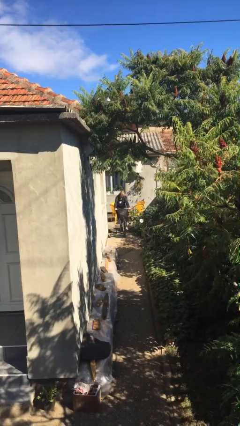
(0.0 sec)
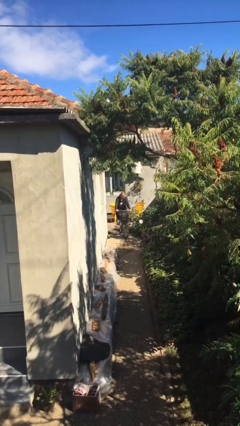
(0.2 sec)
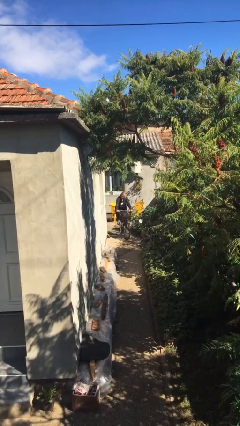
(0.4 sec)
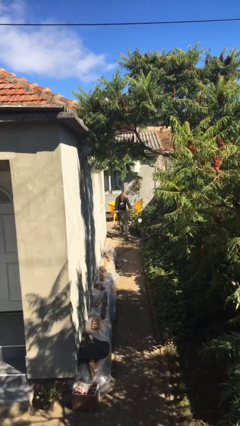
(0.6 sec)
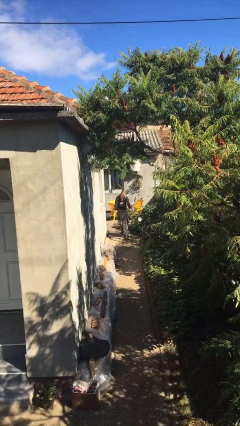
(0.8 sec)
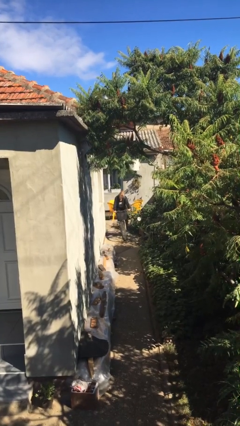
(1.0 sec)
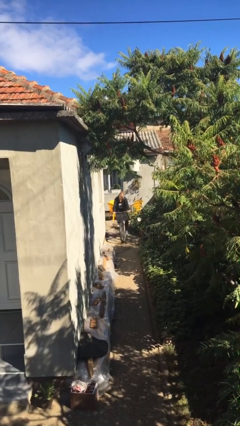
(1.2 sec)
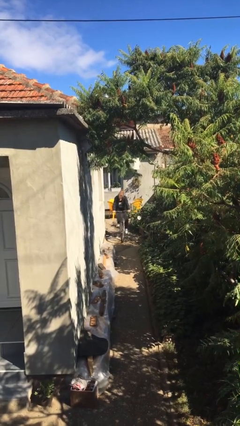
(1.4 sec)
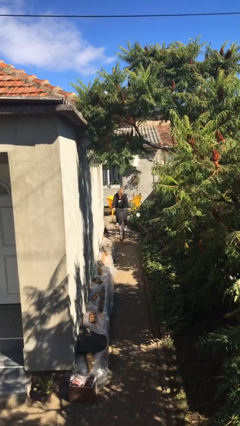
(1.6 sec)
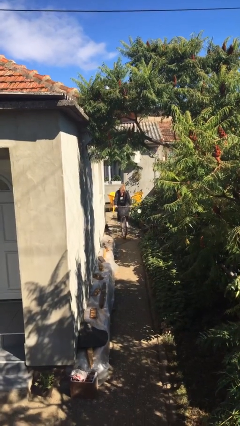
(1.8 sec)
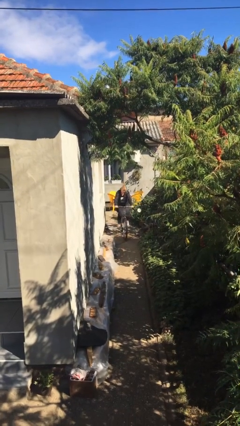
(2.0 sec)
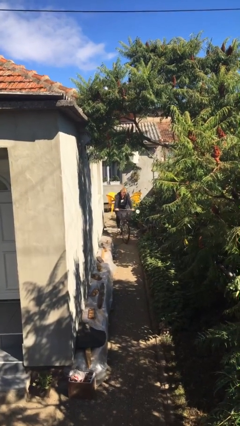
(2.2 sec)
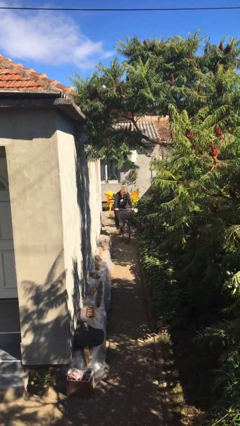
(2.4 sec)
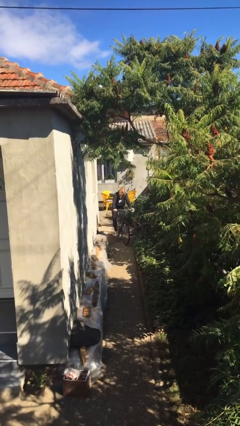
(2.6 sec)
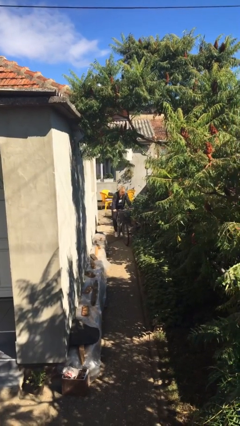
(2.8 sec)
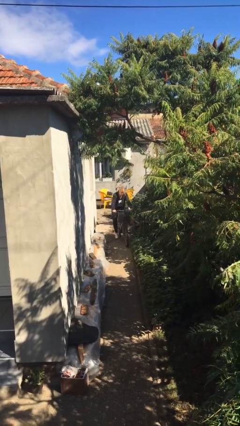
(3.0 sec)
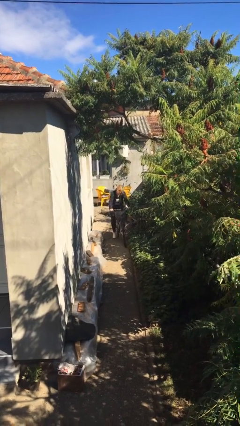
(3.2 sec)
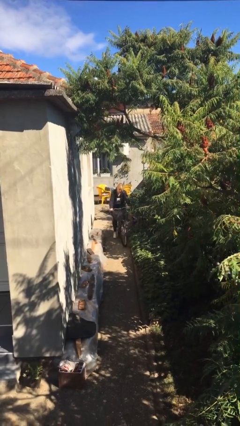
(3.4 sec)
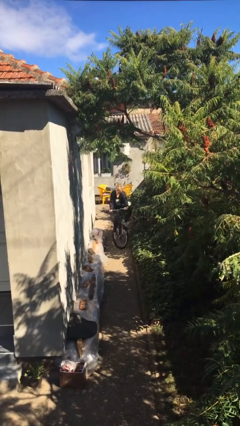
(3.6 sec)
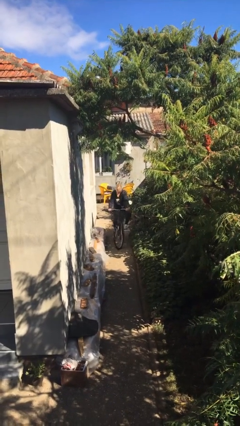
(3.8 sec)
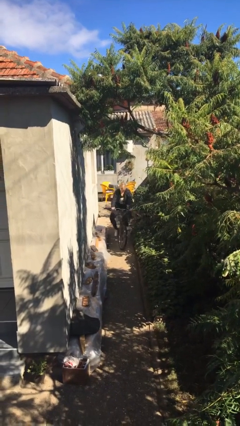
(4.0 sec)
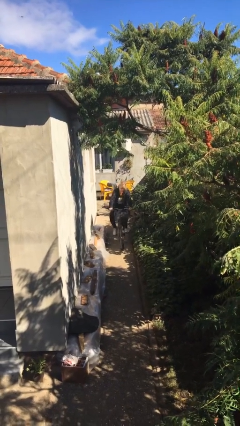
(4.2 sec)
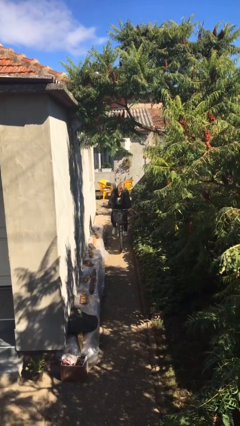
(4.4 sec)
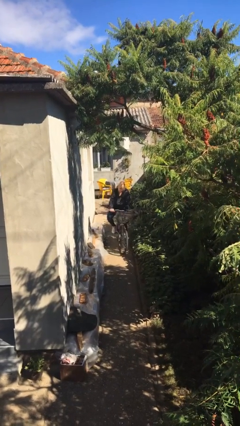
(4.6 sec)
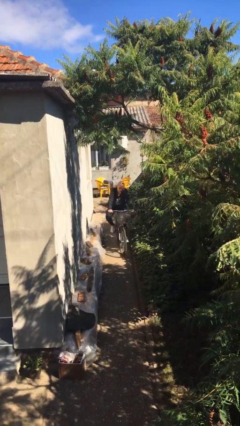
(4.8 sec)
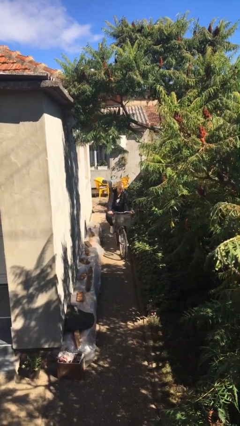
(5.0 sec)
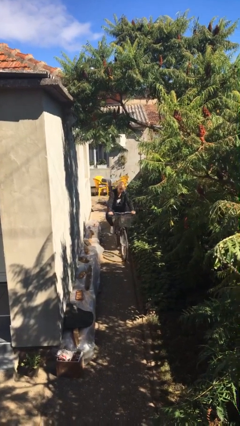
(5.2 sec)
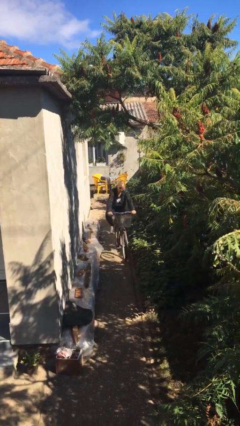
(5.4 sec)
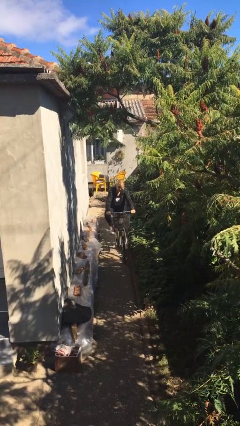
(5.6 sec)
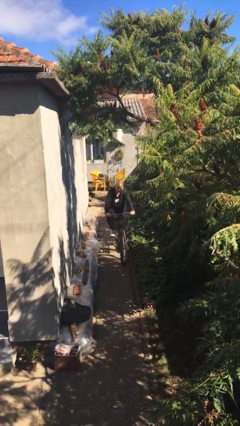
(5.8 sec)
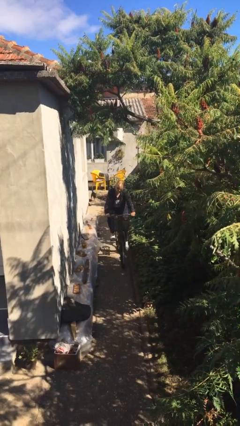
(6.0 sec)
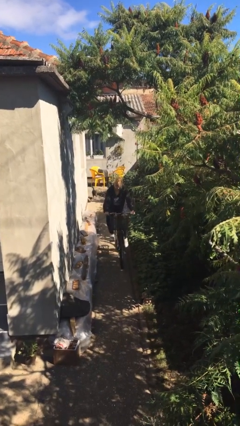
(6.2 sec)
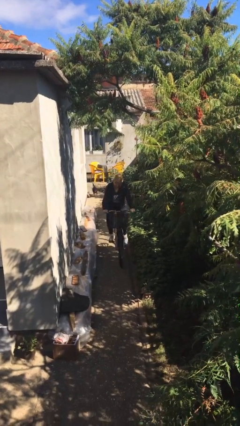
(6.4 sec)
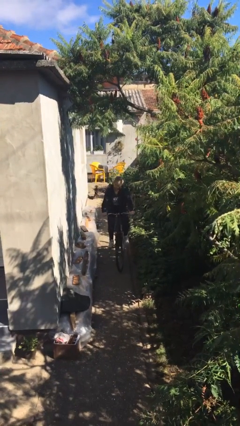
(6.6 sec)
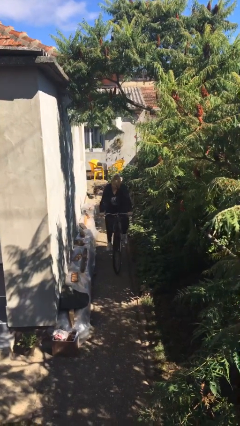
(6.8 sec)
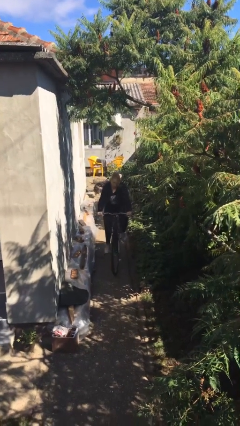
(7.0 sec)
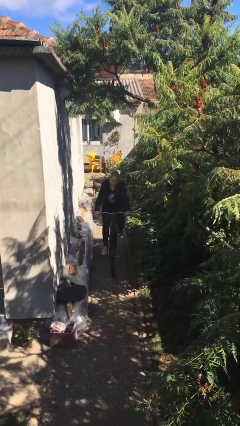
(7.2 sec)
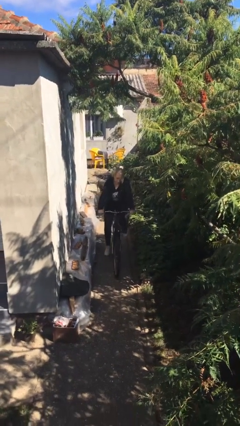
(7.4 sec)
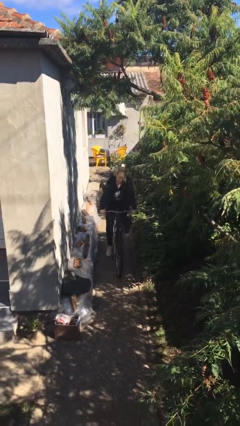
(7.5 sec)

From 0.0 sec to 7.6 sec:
person rides bicycle

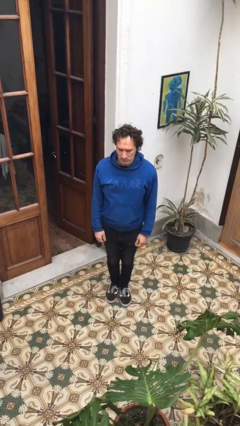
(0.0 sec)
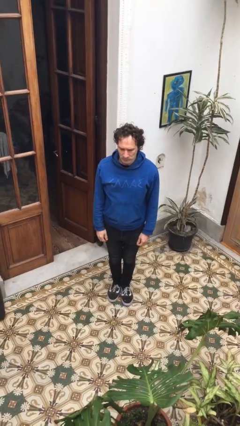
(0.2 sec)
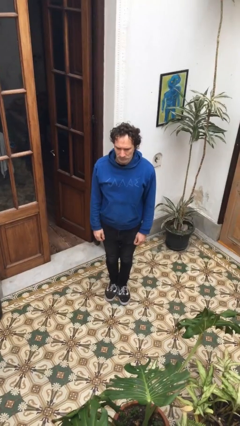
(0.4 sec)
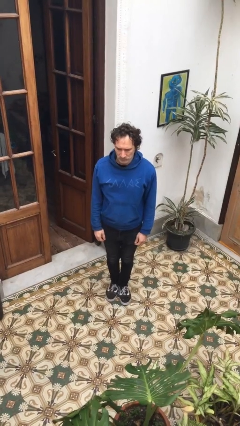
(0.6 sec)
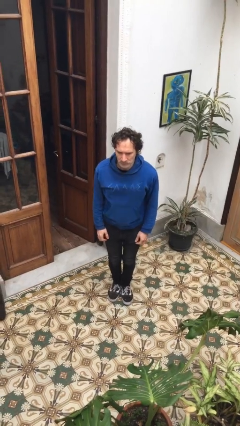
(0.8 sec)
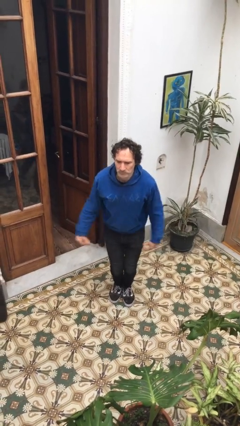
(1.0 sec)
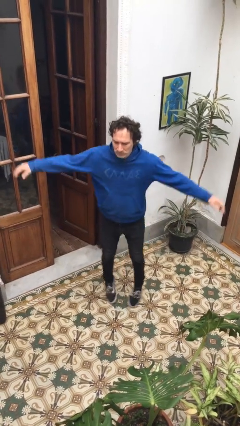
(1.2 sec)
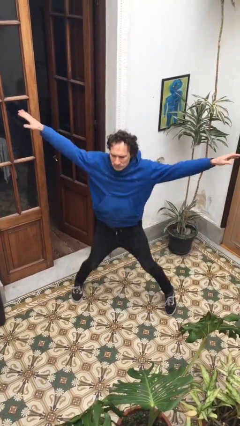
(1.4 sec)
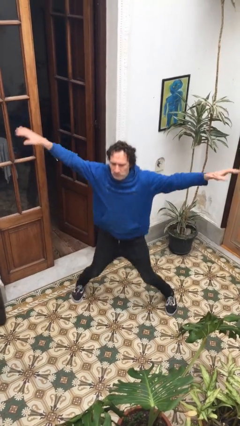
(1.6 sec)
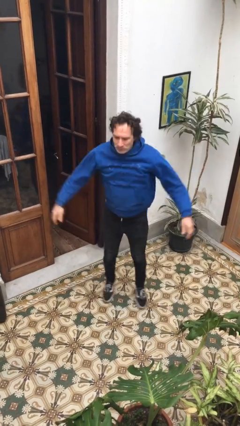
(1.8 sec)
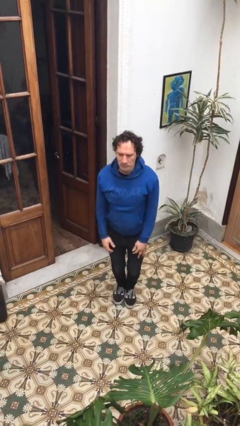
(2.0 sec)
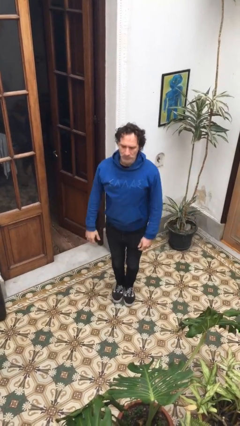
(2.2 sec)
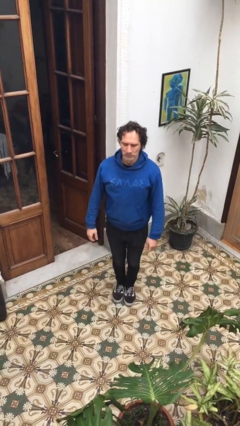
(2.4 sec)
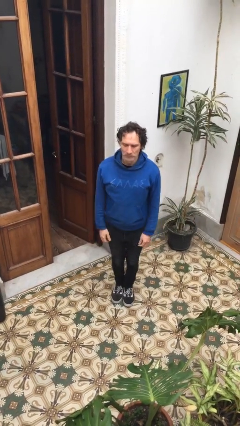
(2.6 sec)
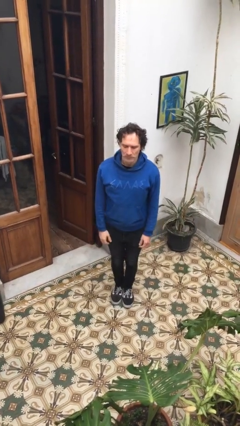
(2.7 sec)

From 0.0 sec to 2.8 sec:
person exercises with jumping jacks

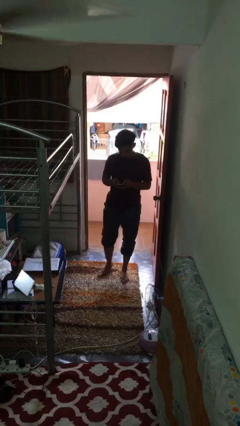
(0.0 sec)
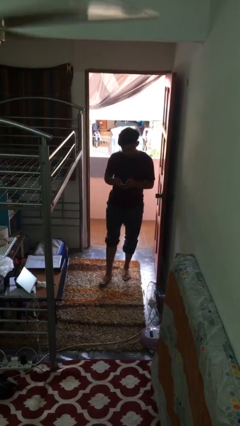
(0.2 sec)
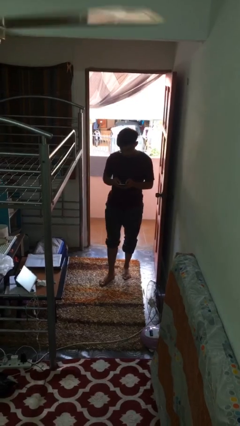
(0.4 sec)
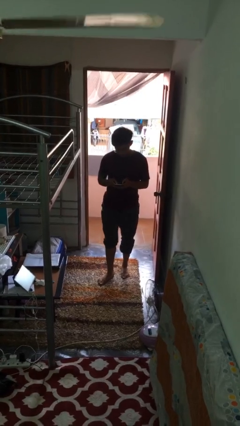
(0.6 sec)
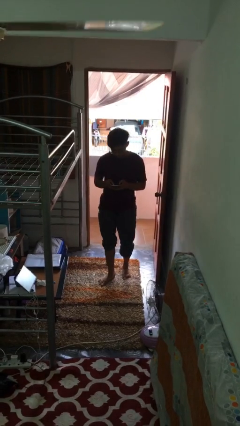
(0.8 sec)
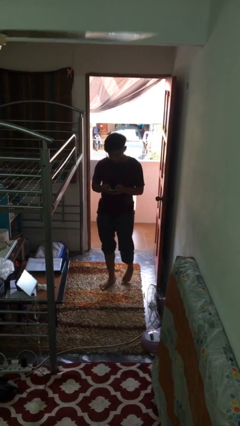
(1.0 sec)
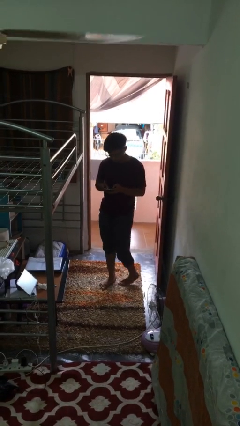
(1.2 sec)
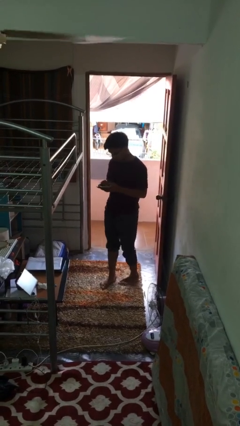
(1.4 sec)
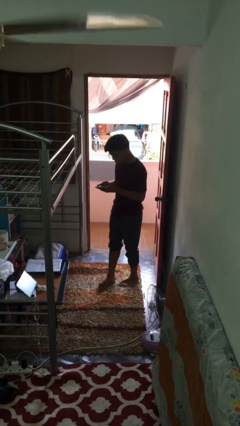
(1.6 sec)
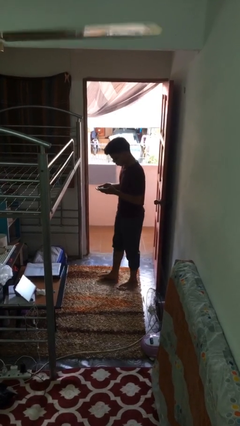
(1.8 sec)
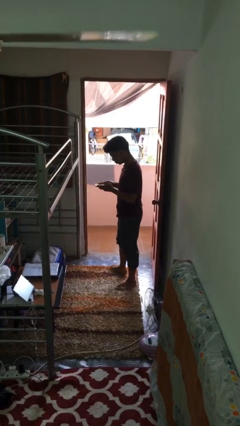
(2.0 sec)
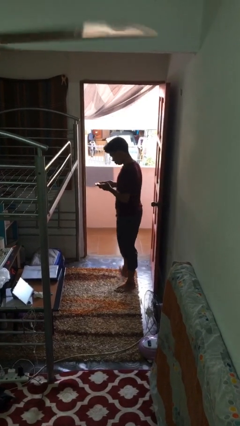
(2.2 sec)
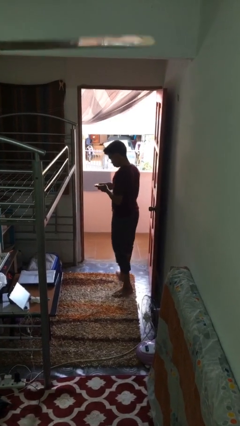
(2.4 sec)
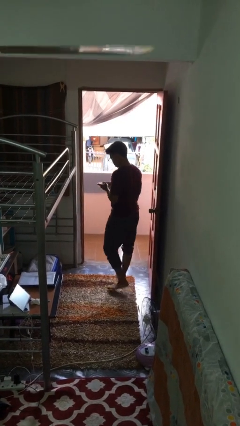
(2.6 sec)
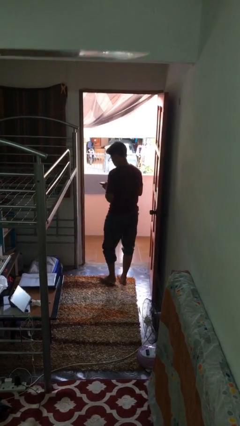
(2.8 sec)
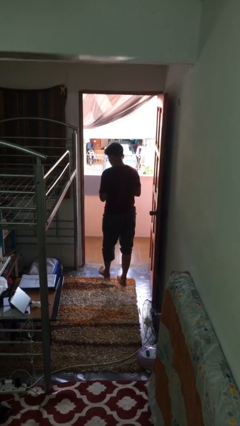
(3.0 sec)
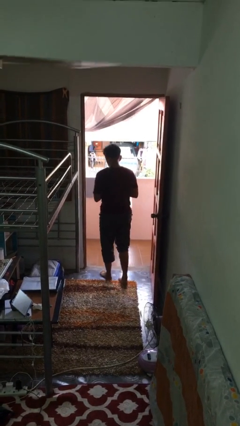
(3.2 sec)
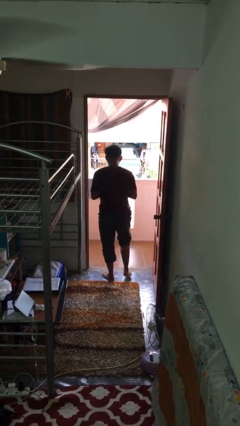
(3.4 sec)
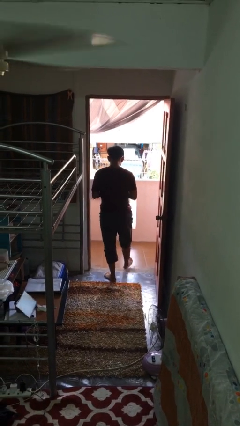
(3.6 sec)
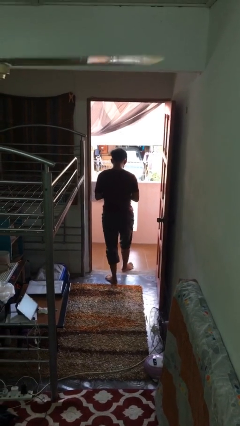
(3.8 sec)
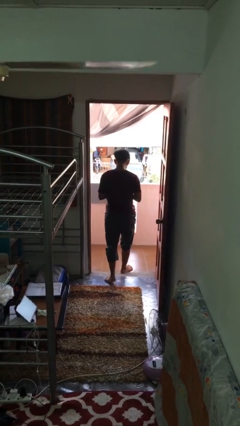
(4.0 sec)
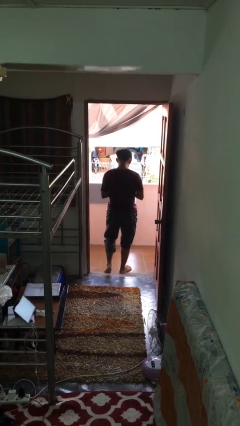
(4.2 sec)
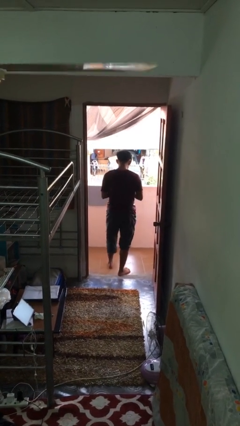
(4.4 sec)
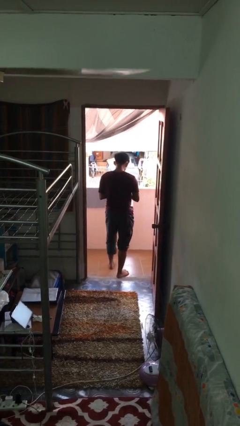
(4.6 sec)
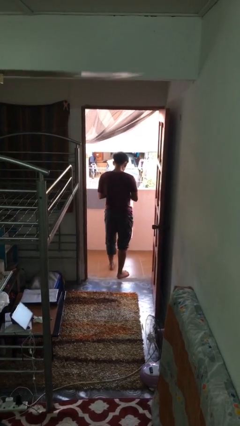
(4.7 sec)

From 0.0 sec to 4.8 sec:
person exits scene through structure

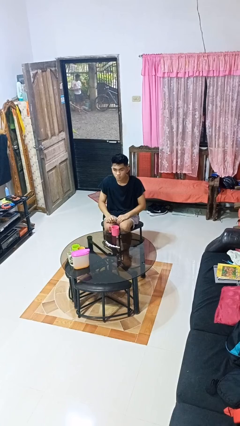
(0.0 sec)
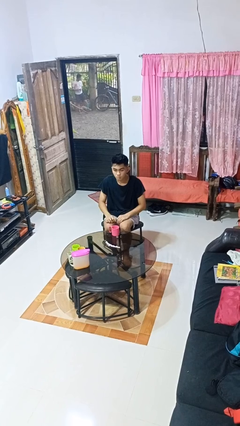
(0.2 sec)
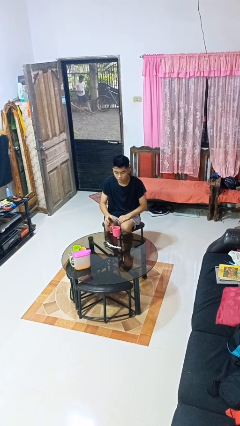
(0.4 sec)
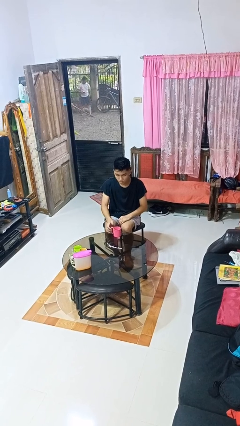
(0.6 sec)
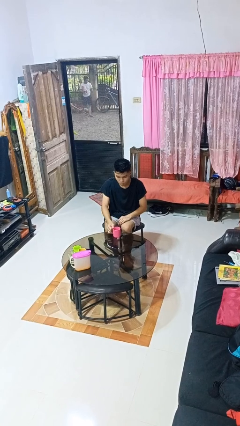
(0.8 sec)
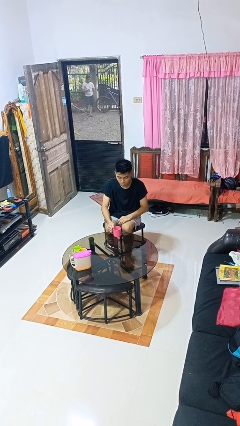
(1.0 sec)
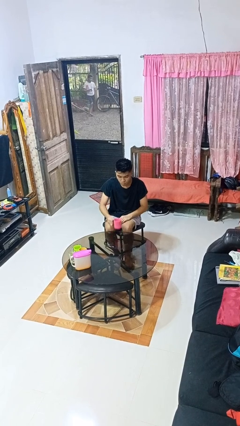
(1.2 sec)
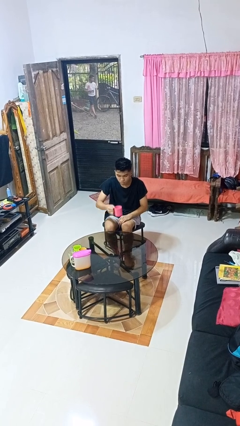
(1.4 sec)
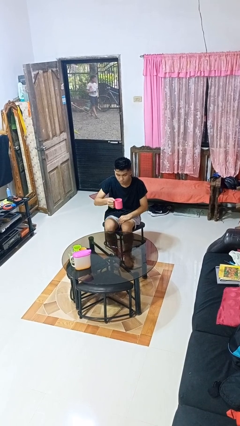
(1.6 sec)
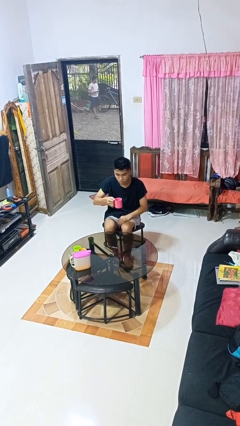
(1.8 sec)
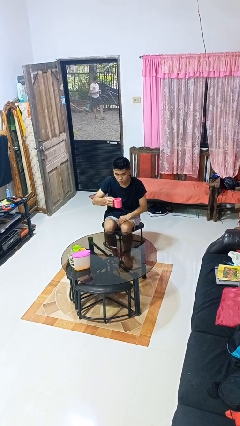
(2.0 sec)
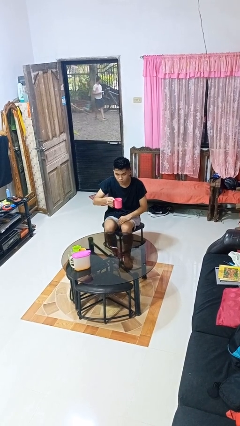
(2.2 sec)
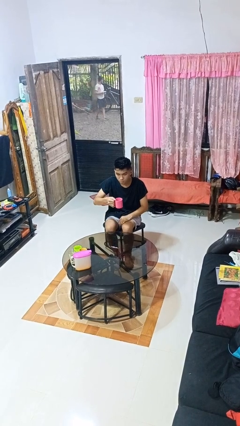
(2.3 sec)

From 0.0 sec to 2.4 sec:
person picks up object from table
